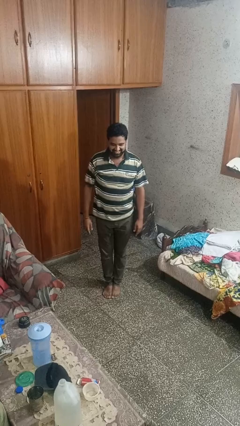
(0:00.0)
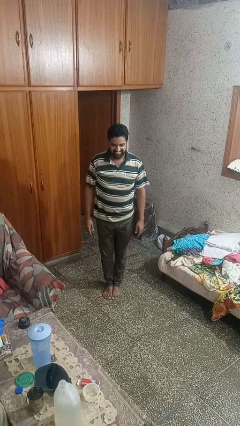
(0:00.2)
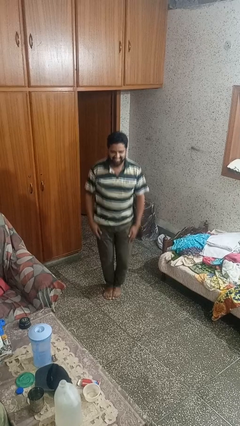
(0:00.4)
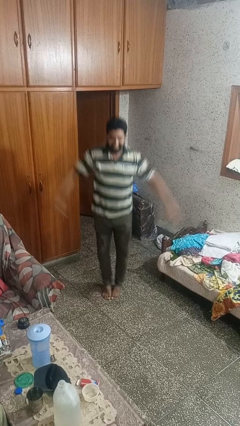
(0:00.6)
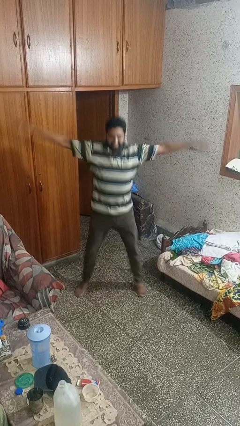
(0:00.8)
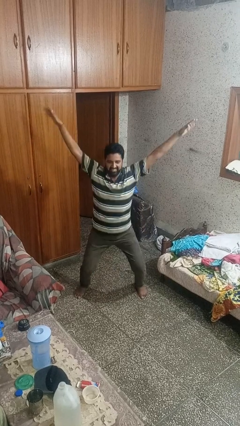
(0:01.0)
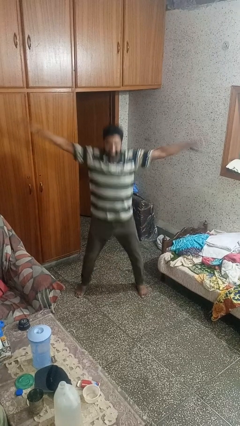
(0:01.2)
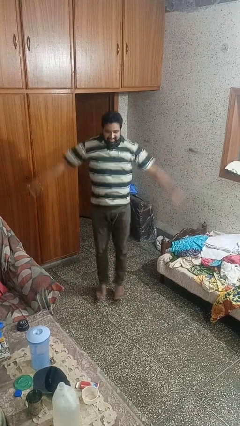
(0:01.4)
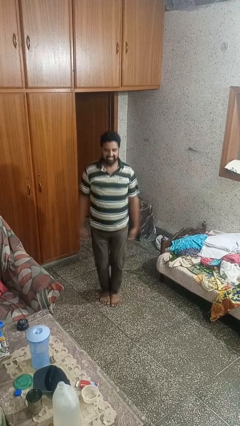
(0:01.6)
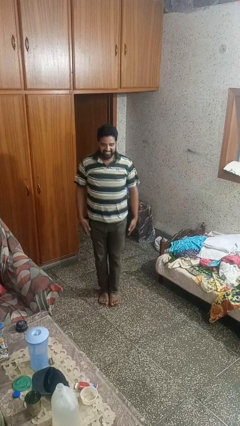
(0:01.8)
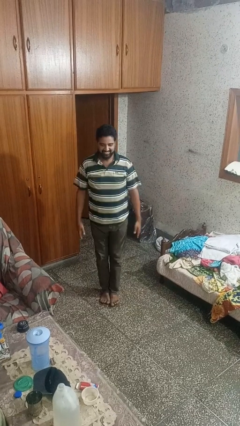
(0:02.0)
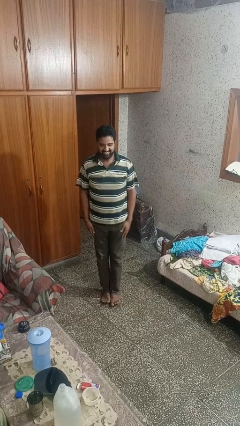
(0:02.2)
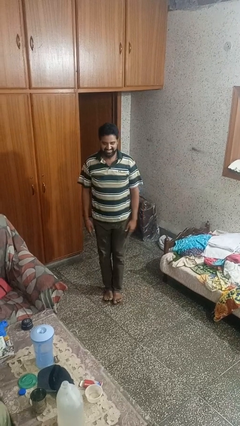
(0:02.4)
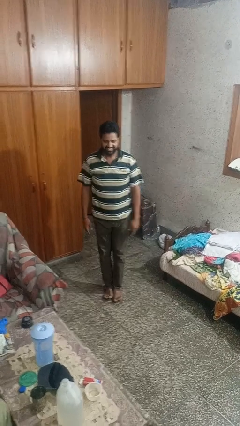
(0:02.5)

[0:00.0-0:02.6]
person exercises with jumping jacks

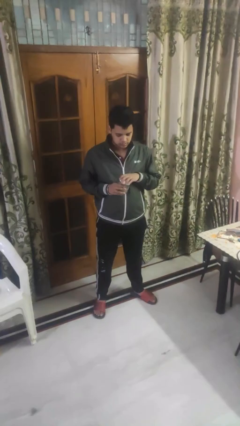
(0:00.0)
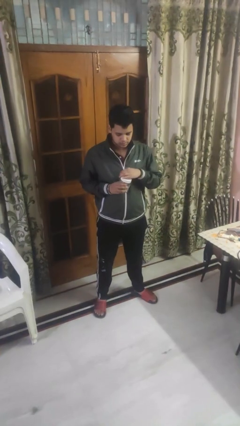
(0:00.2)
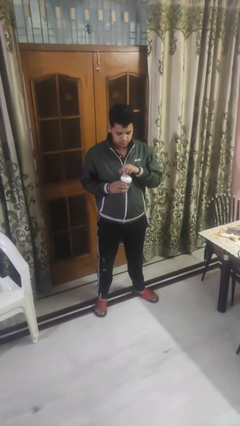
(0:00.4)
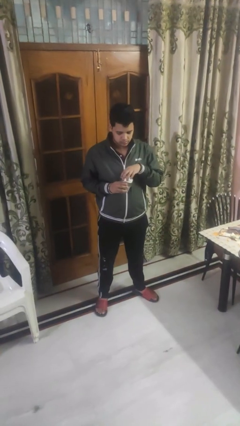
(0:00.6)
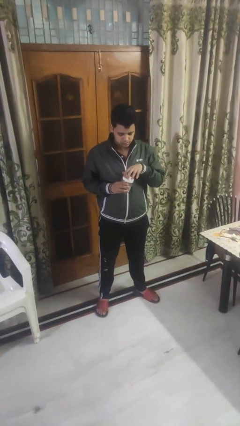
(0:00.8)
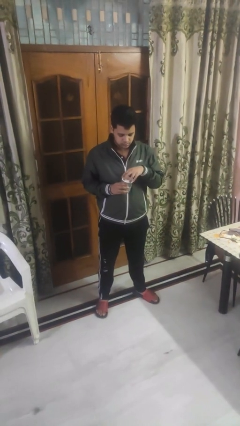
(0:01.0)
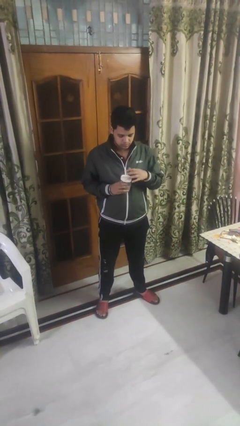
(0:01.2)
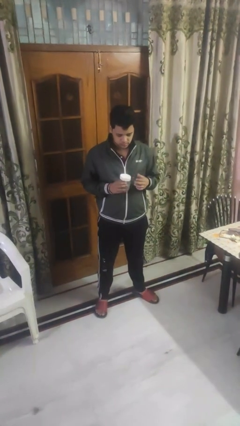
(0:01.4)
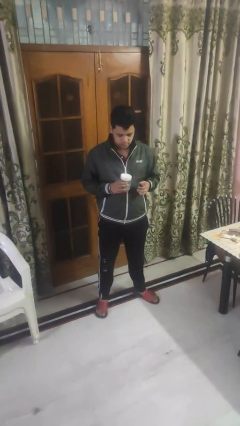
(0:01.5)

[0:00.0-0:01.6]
person closes jar

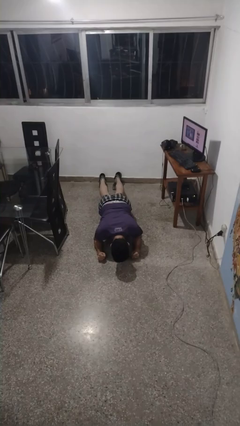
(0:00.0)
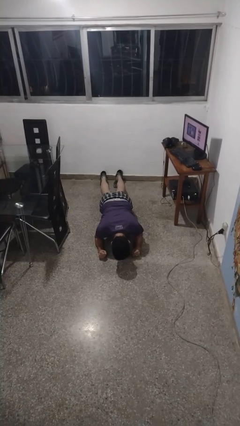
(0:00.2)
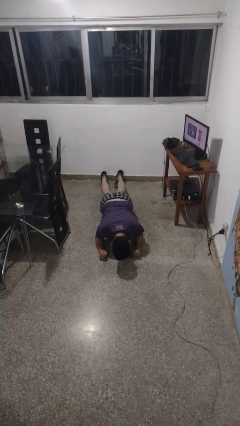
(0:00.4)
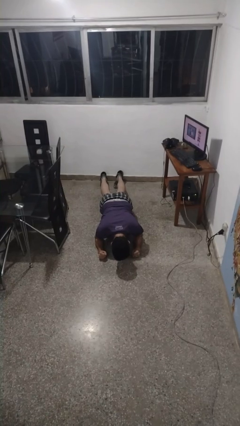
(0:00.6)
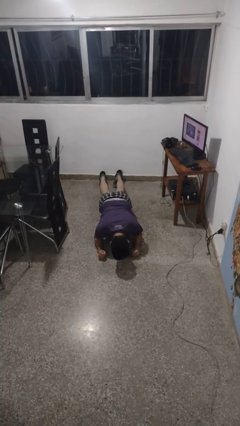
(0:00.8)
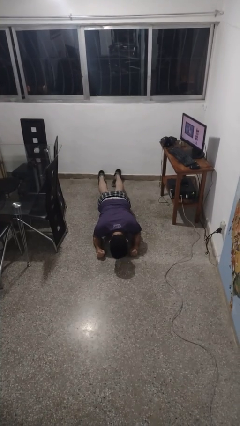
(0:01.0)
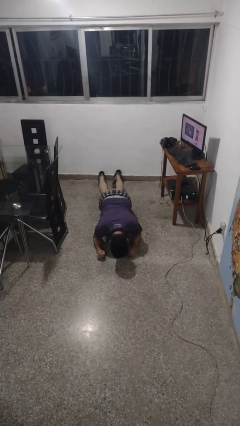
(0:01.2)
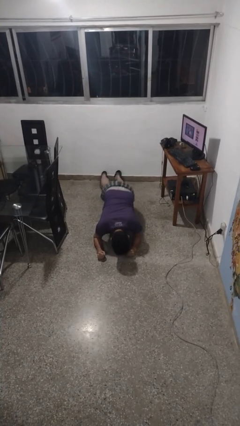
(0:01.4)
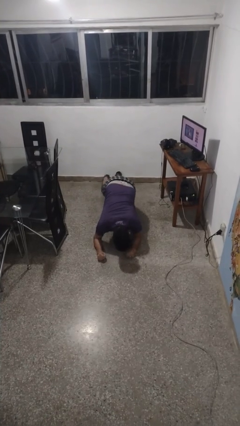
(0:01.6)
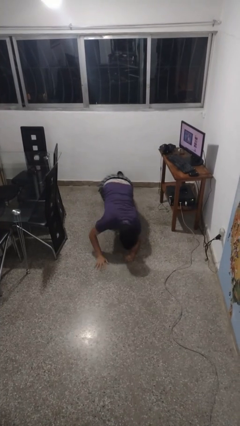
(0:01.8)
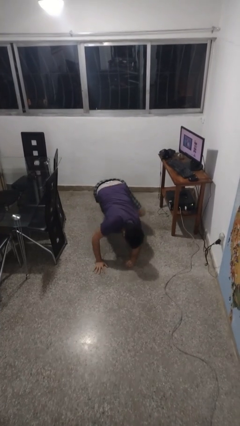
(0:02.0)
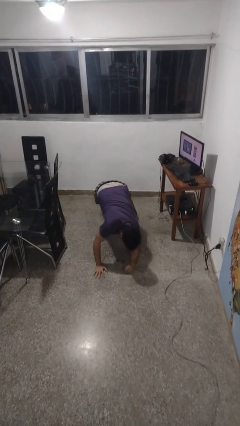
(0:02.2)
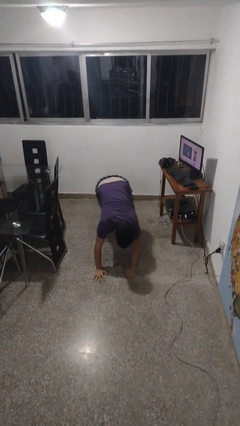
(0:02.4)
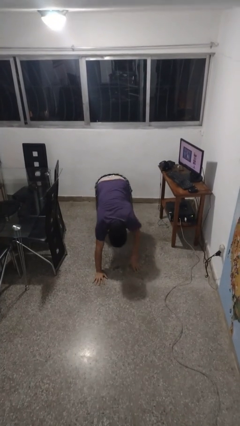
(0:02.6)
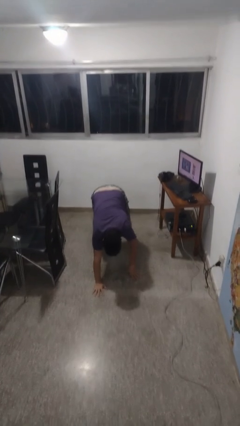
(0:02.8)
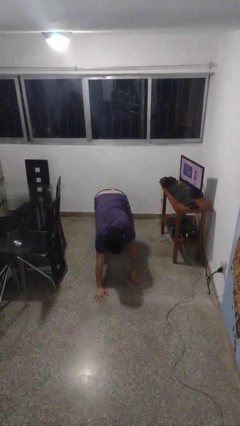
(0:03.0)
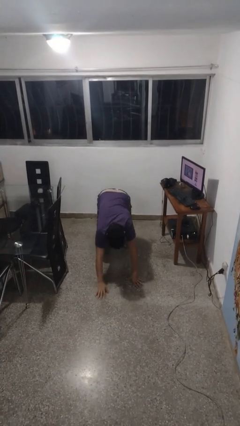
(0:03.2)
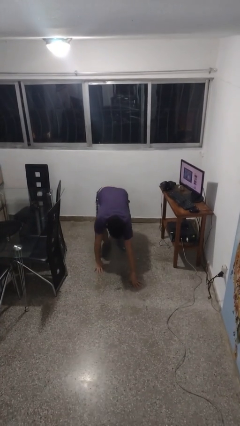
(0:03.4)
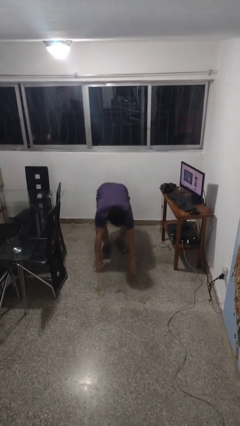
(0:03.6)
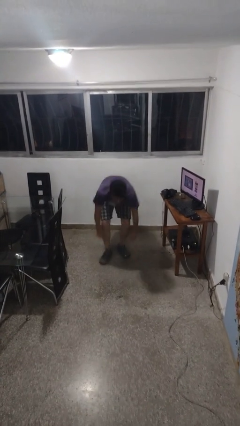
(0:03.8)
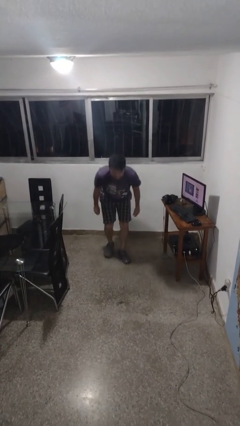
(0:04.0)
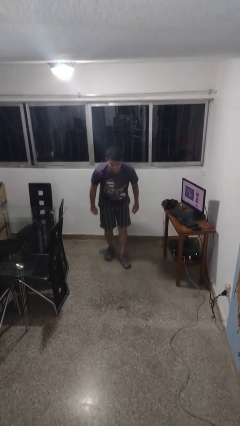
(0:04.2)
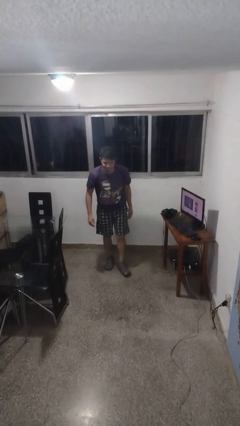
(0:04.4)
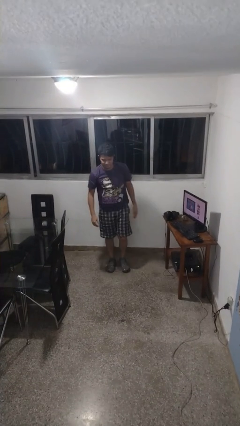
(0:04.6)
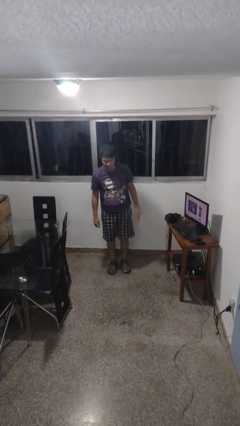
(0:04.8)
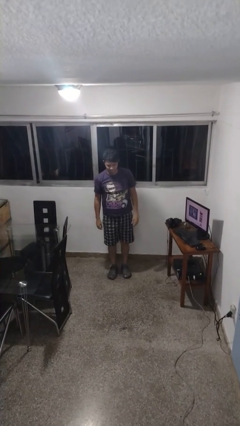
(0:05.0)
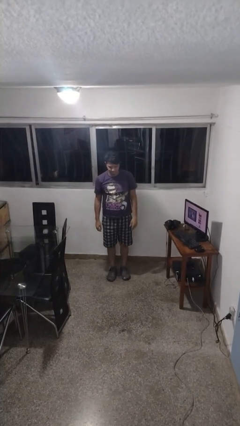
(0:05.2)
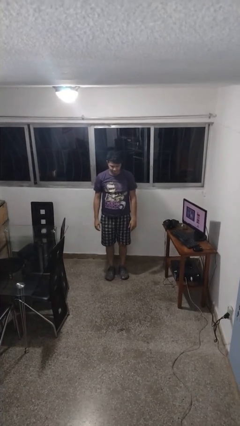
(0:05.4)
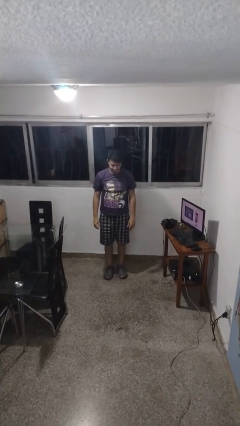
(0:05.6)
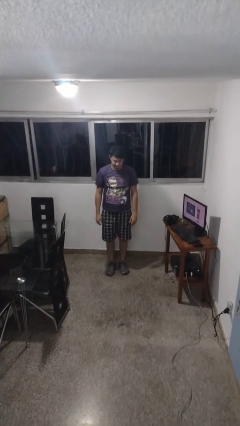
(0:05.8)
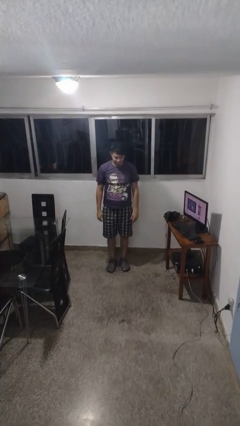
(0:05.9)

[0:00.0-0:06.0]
person stands up from floor

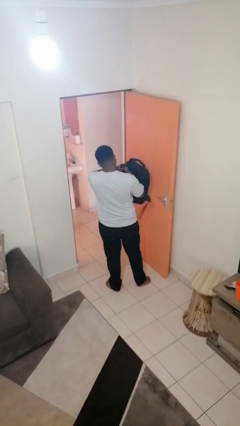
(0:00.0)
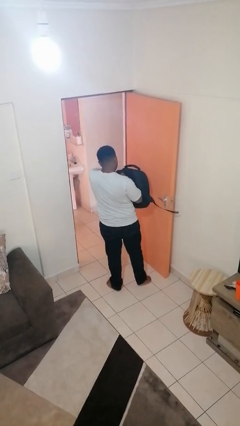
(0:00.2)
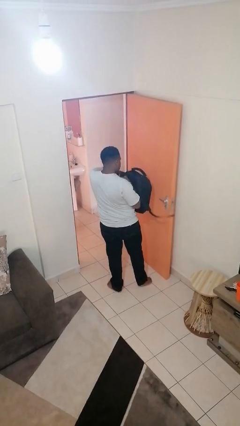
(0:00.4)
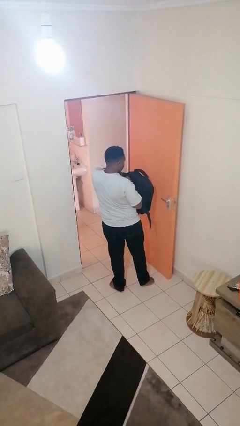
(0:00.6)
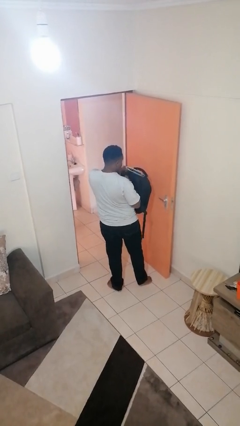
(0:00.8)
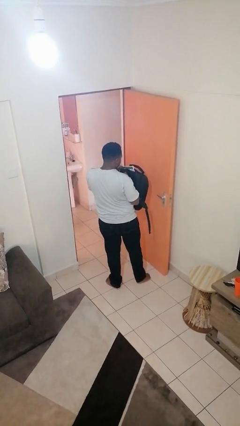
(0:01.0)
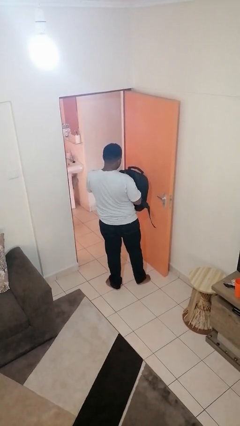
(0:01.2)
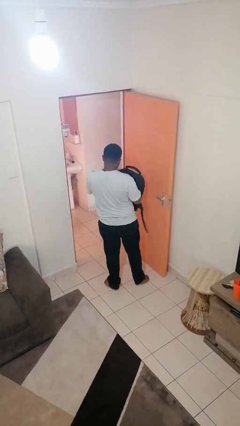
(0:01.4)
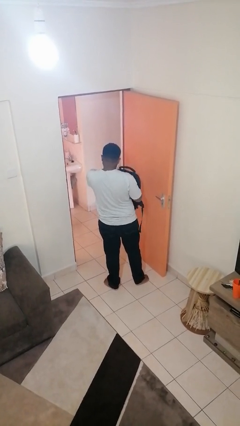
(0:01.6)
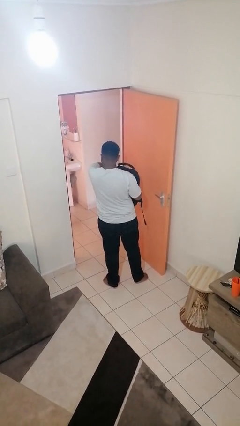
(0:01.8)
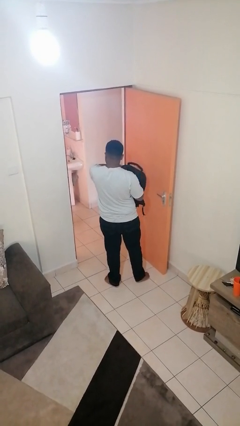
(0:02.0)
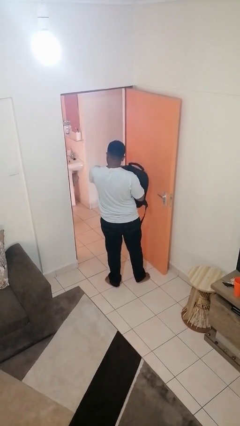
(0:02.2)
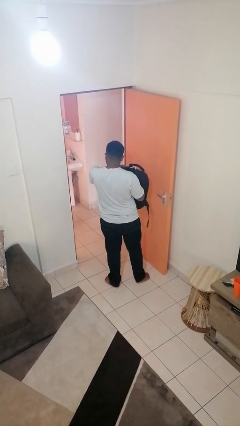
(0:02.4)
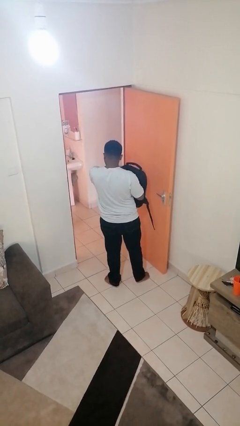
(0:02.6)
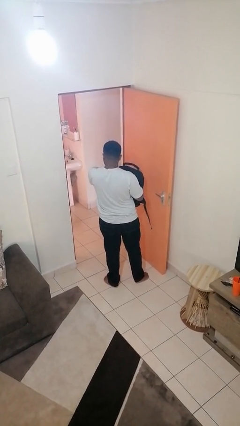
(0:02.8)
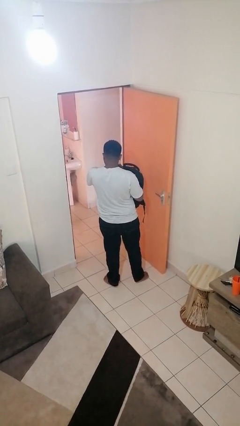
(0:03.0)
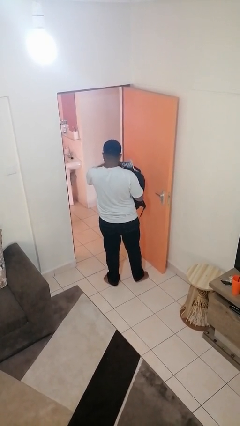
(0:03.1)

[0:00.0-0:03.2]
person searches in backpack

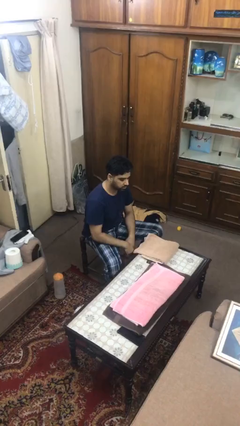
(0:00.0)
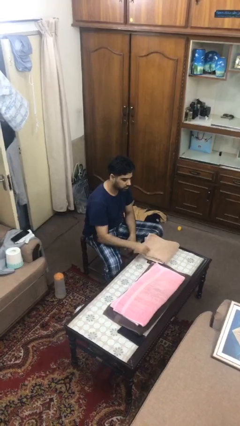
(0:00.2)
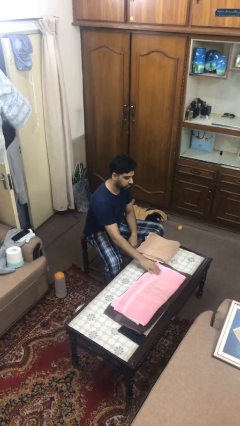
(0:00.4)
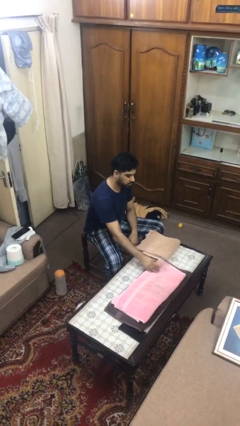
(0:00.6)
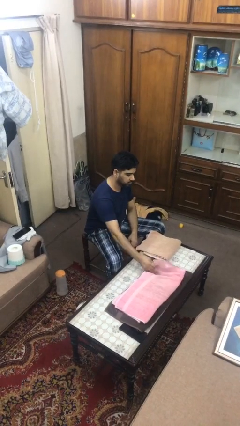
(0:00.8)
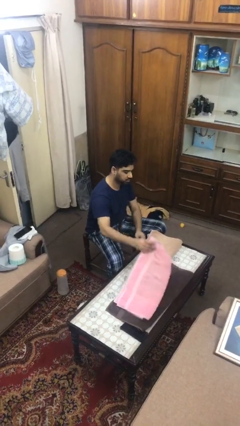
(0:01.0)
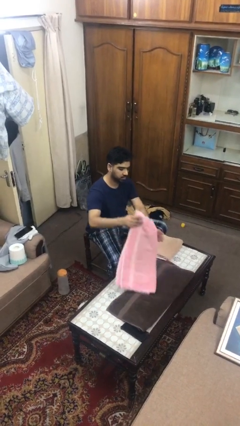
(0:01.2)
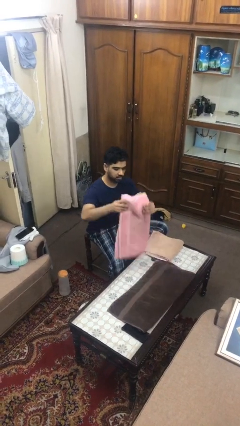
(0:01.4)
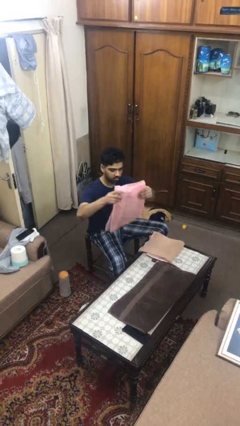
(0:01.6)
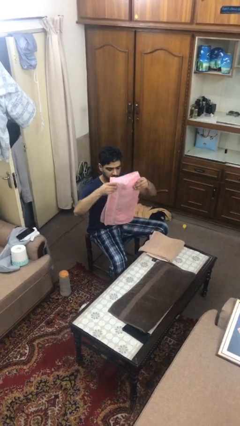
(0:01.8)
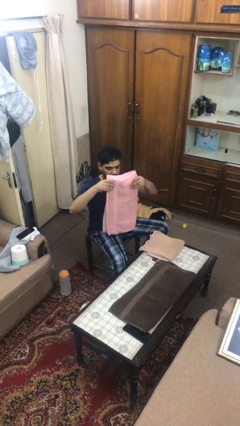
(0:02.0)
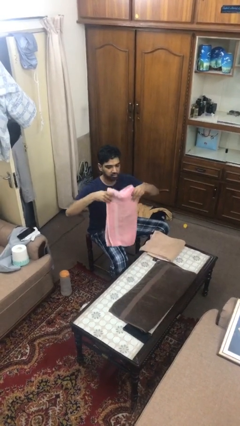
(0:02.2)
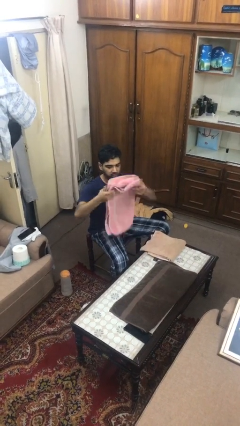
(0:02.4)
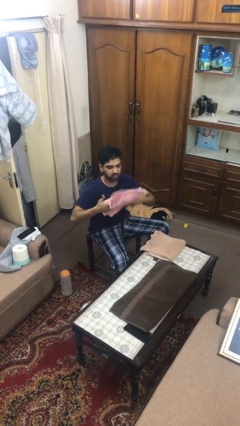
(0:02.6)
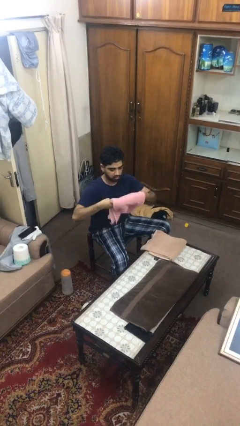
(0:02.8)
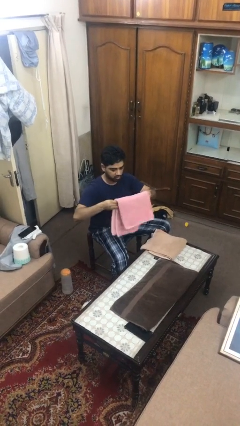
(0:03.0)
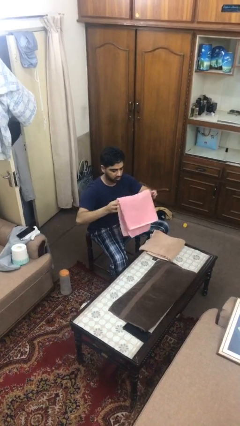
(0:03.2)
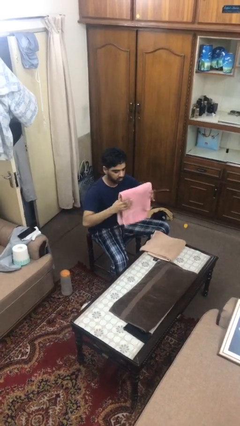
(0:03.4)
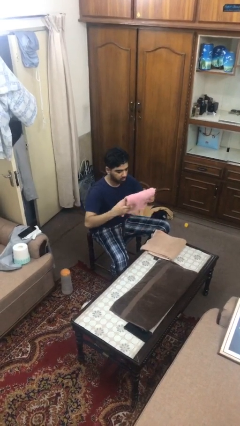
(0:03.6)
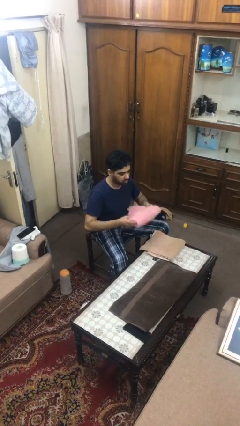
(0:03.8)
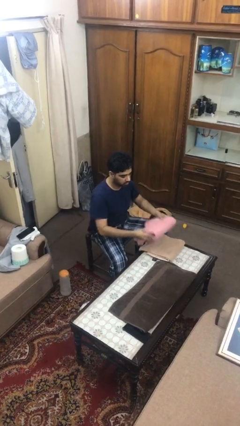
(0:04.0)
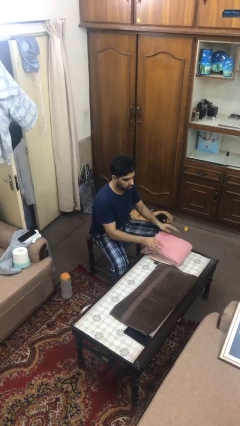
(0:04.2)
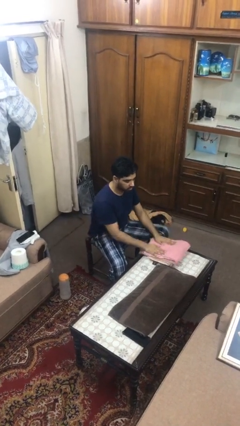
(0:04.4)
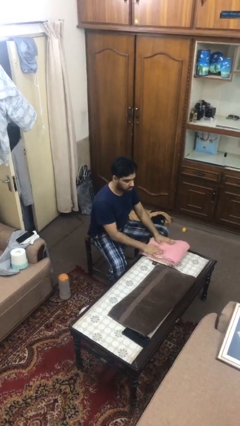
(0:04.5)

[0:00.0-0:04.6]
person folds towel
